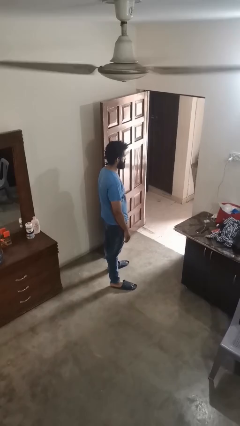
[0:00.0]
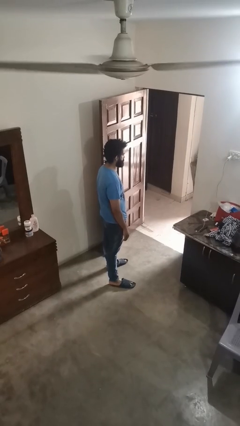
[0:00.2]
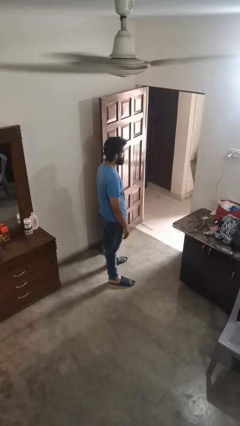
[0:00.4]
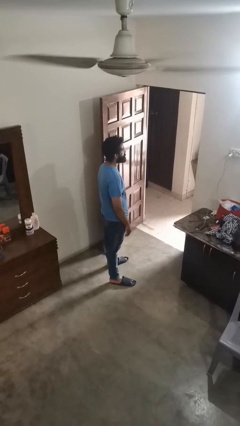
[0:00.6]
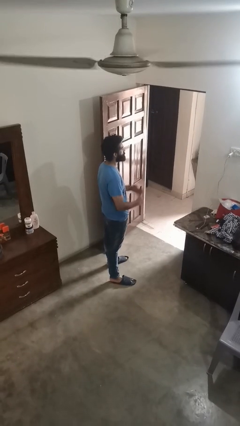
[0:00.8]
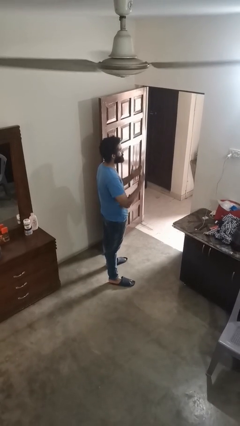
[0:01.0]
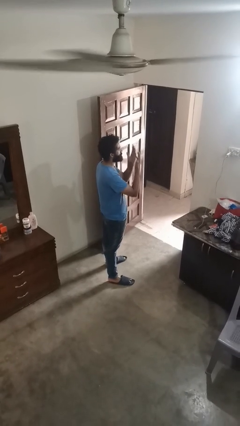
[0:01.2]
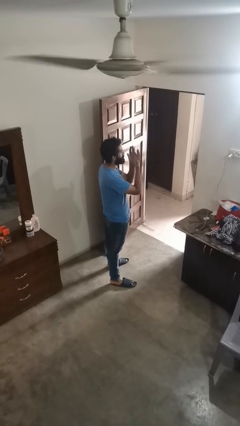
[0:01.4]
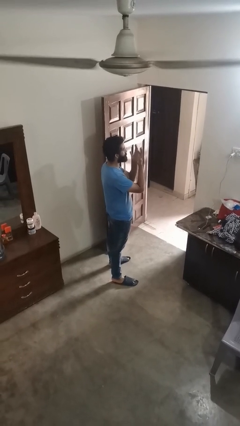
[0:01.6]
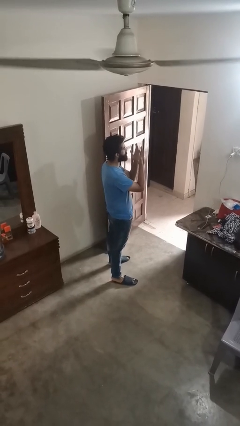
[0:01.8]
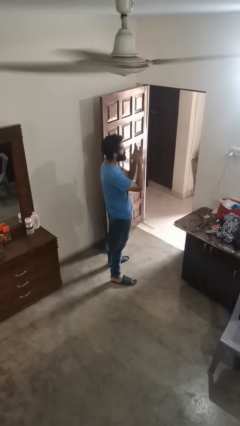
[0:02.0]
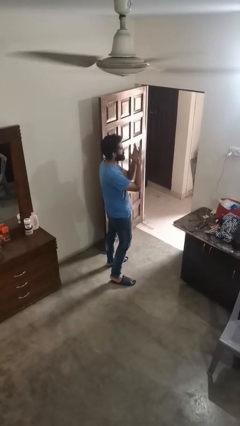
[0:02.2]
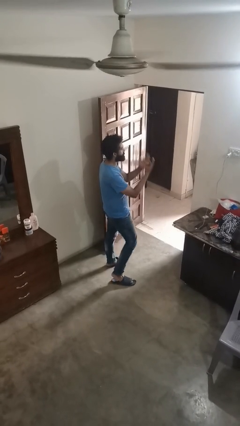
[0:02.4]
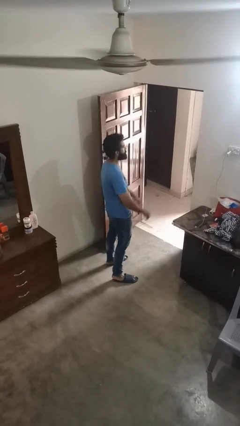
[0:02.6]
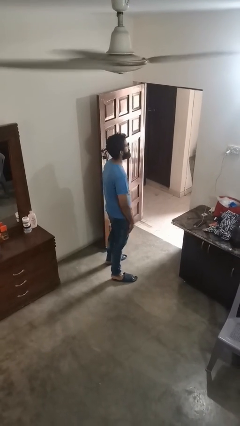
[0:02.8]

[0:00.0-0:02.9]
person prays

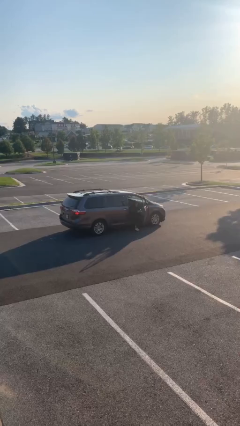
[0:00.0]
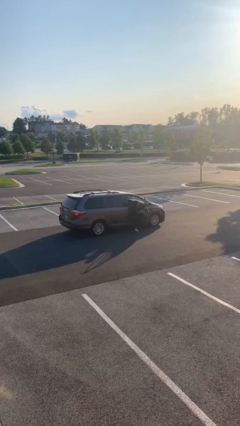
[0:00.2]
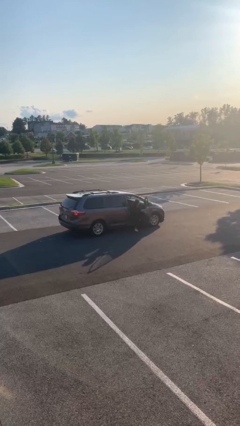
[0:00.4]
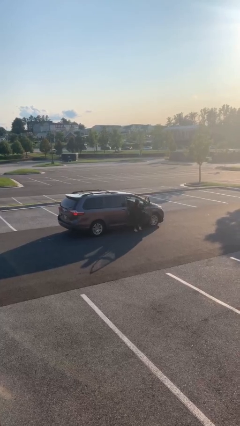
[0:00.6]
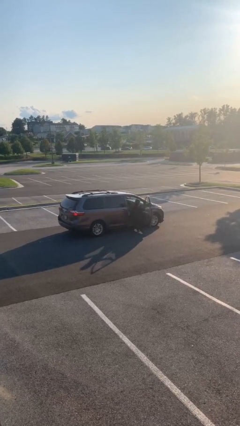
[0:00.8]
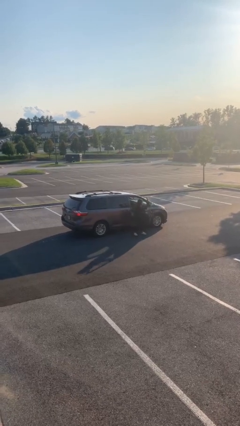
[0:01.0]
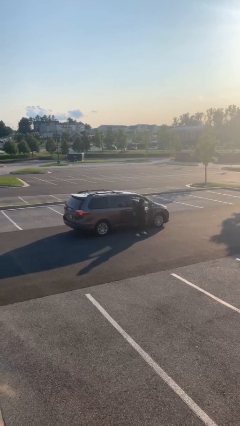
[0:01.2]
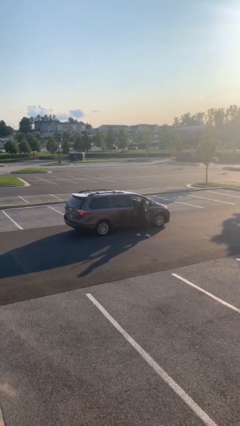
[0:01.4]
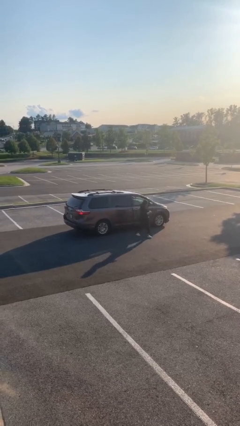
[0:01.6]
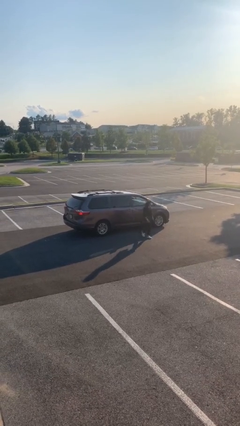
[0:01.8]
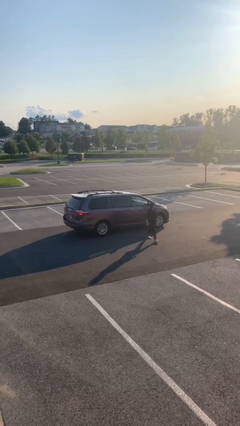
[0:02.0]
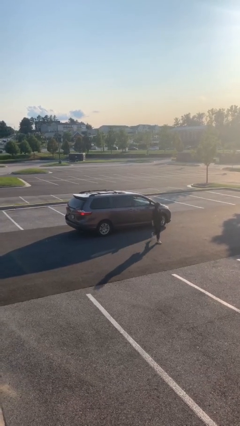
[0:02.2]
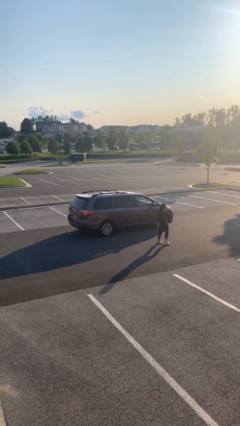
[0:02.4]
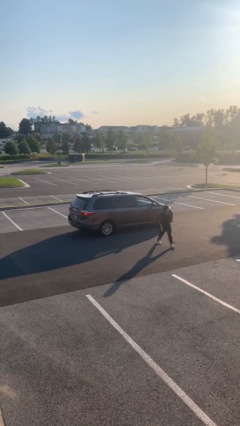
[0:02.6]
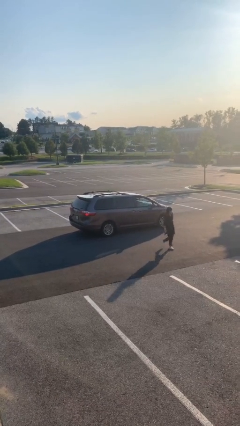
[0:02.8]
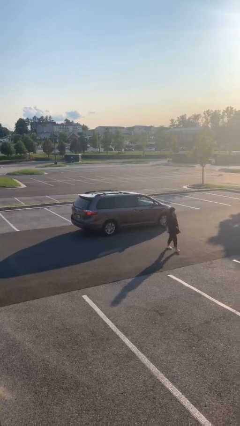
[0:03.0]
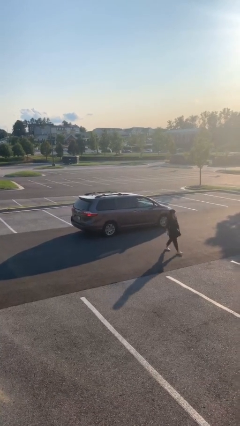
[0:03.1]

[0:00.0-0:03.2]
car drops off person

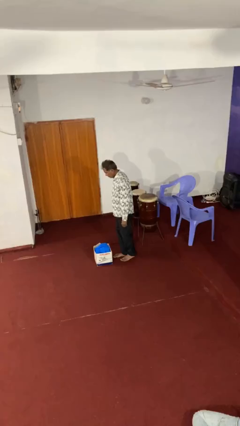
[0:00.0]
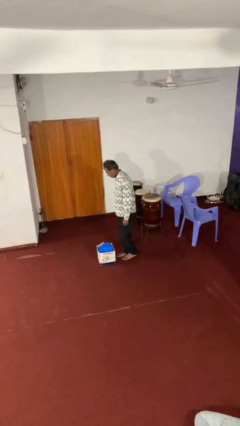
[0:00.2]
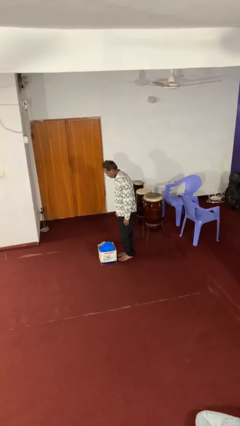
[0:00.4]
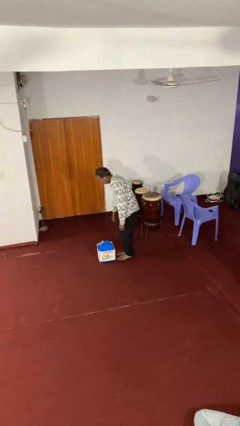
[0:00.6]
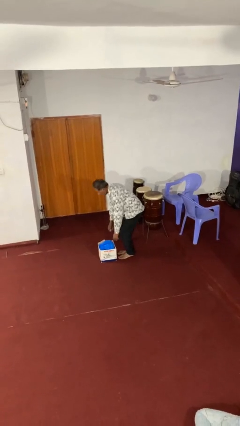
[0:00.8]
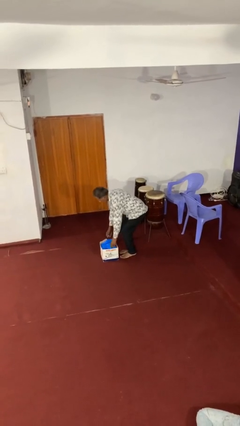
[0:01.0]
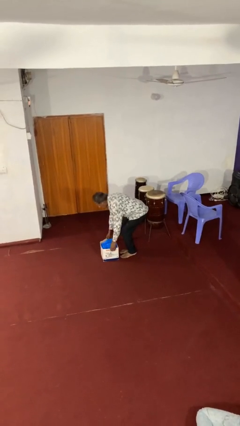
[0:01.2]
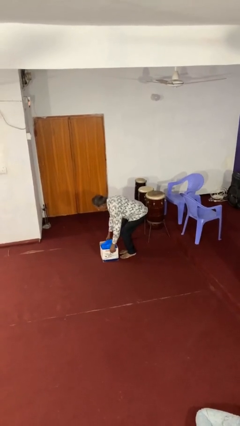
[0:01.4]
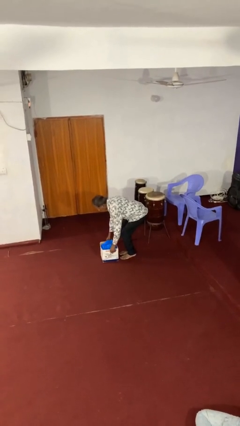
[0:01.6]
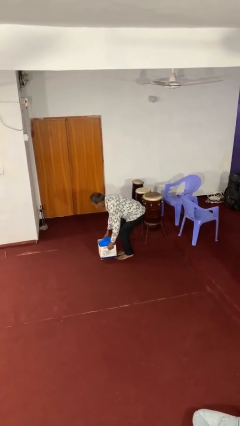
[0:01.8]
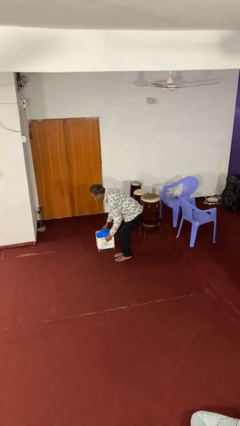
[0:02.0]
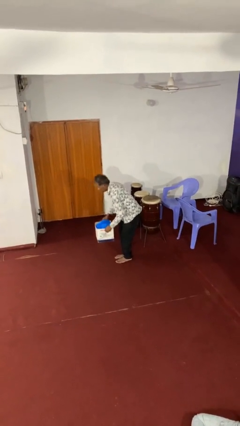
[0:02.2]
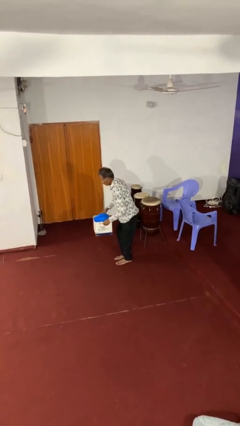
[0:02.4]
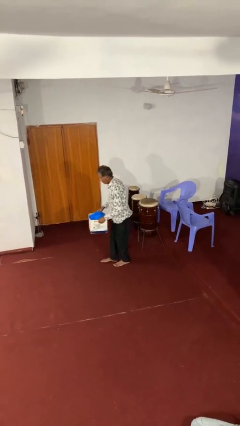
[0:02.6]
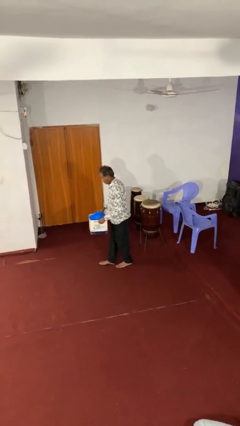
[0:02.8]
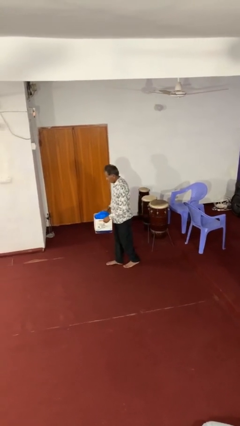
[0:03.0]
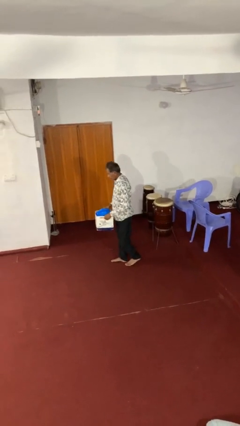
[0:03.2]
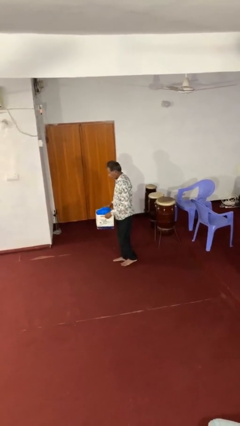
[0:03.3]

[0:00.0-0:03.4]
person picks up object from floor

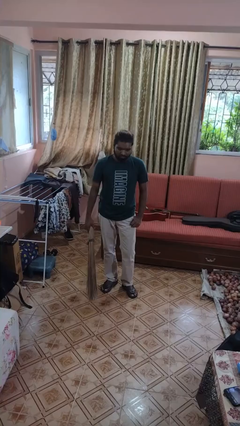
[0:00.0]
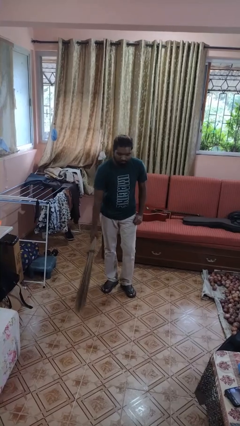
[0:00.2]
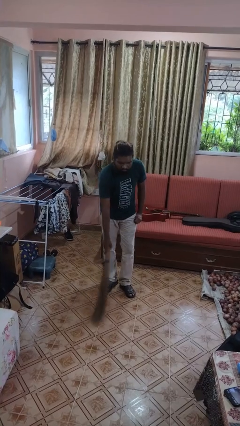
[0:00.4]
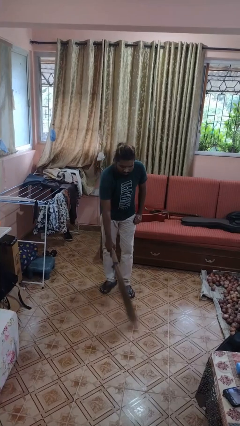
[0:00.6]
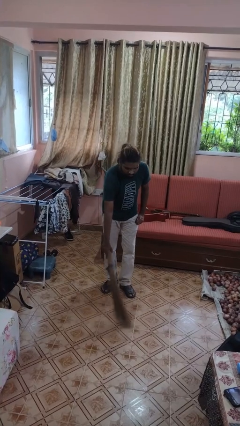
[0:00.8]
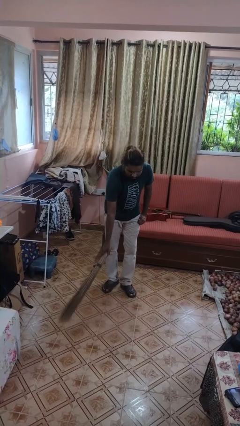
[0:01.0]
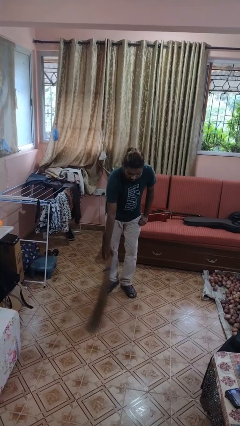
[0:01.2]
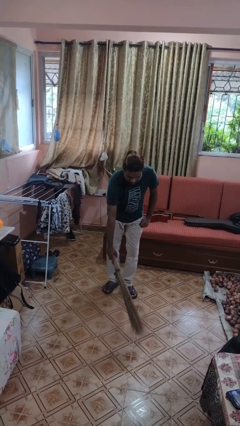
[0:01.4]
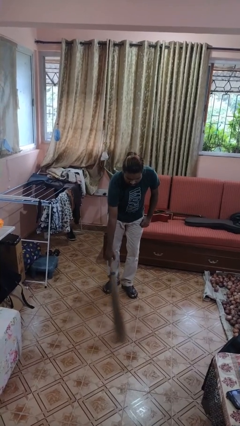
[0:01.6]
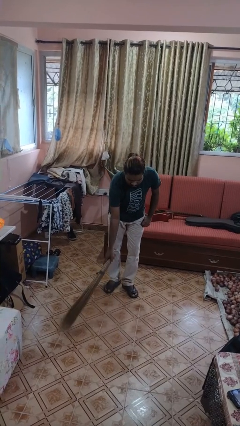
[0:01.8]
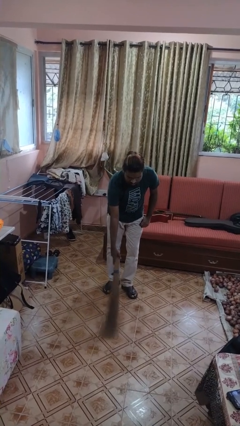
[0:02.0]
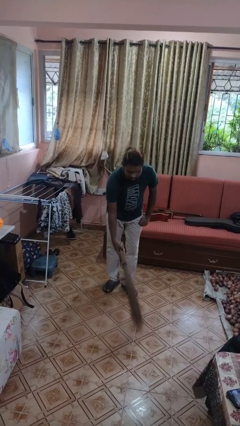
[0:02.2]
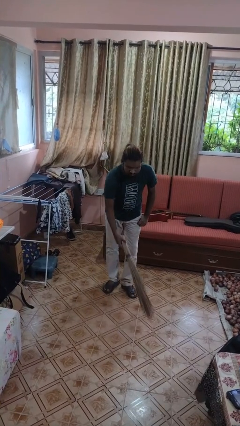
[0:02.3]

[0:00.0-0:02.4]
person sweeps floor

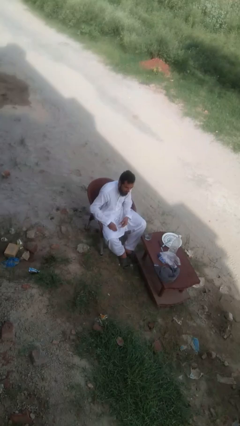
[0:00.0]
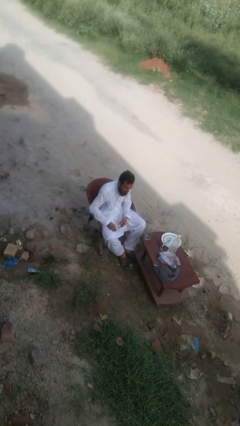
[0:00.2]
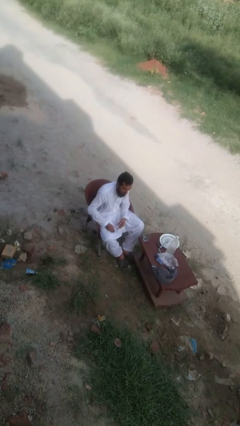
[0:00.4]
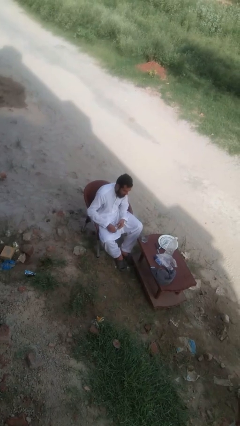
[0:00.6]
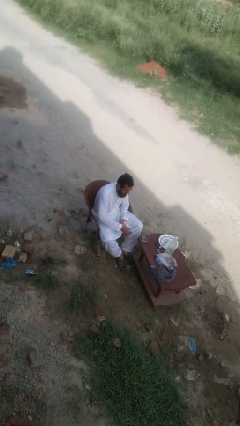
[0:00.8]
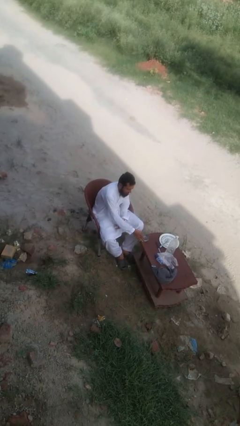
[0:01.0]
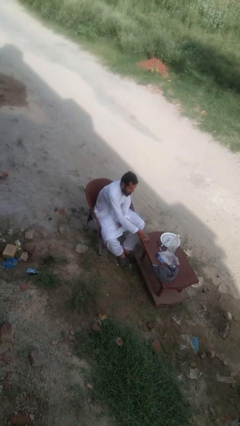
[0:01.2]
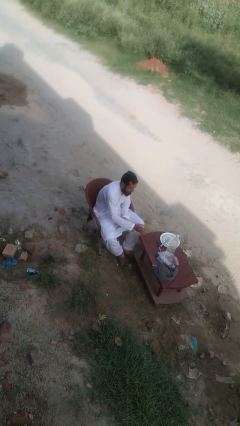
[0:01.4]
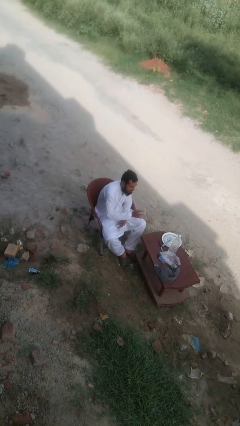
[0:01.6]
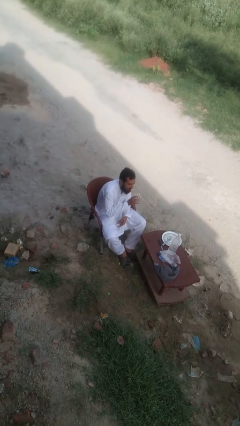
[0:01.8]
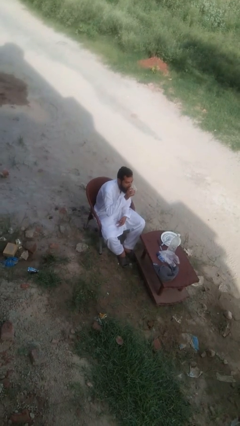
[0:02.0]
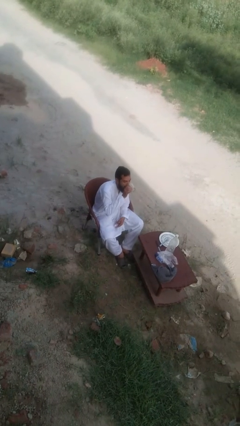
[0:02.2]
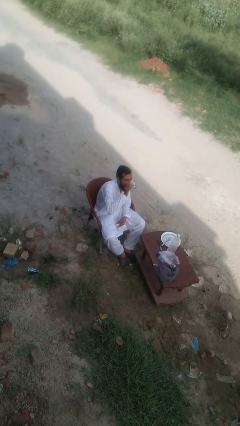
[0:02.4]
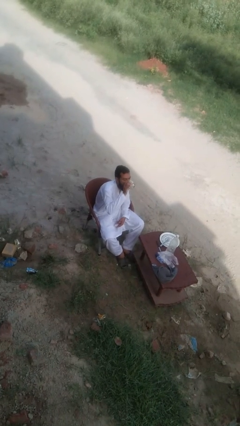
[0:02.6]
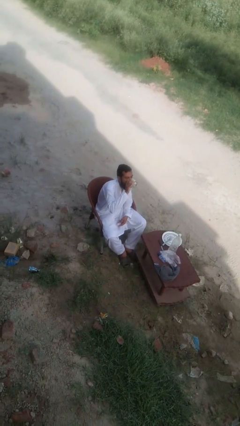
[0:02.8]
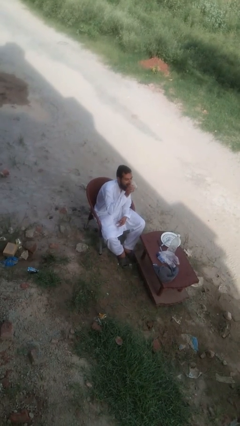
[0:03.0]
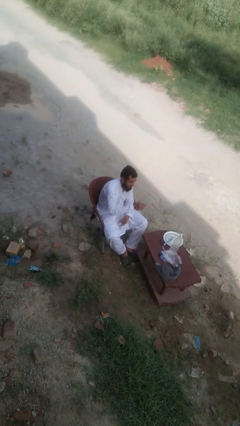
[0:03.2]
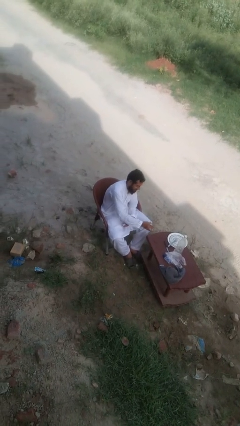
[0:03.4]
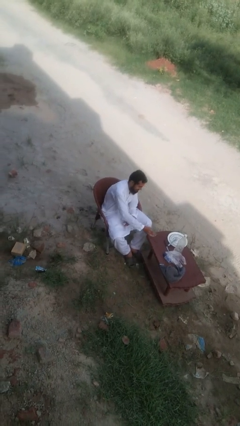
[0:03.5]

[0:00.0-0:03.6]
person drinks from cup

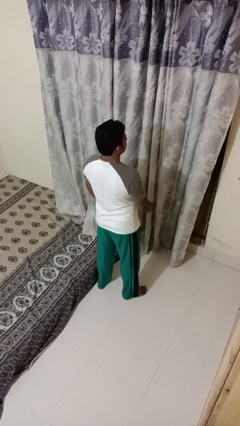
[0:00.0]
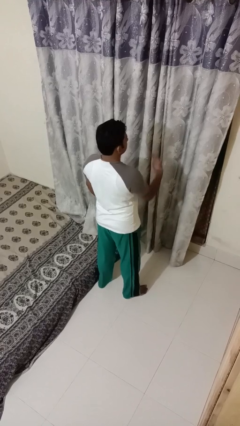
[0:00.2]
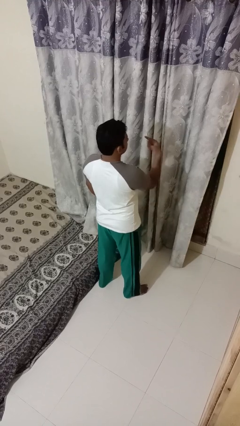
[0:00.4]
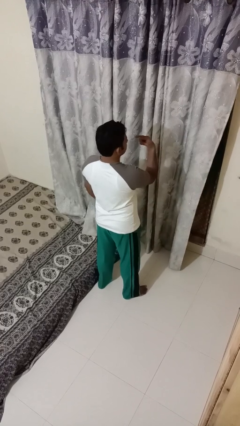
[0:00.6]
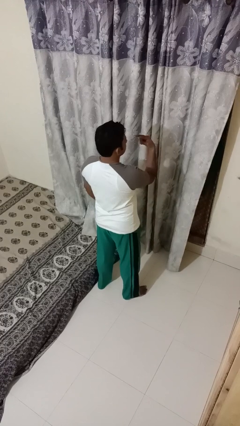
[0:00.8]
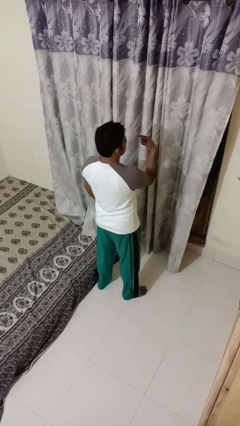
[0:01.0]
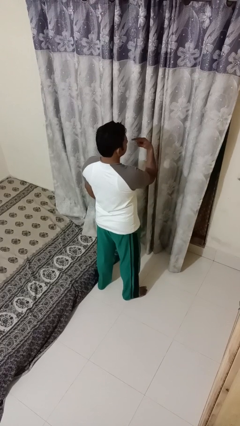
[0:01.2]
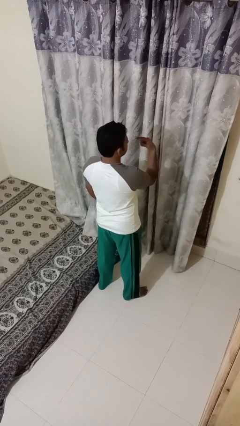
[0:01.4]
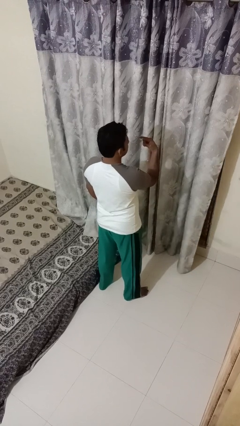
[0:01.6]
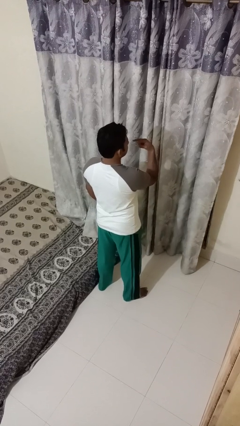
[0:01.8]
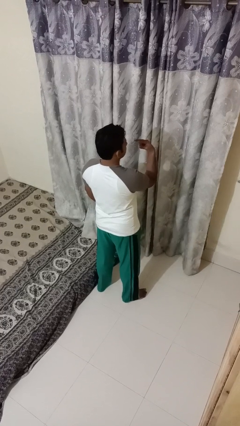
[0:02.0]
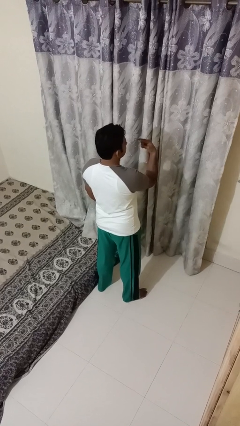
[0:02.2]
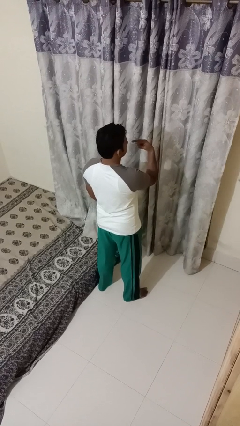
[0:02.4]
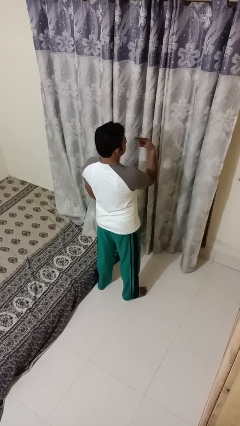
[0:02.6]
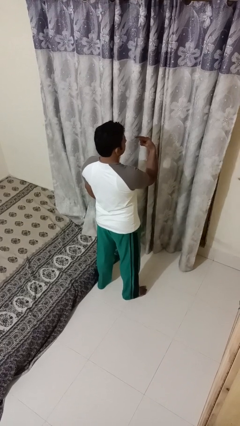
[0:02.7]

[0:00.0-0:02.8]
person gestures watch closely
